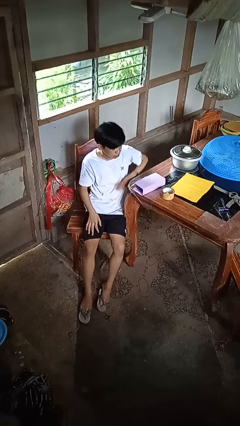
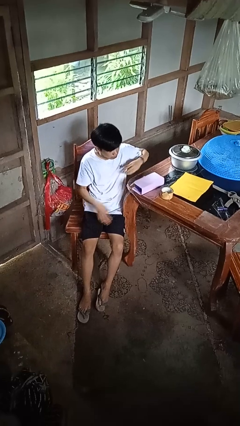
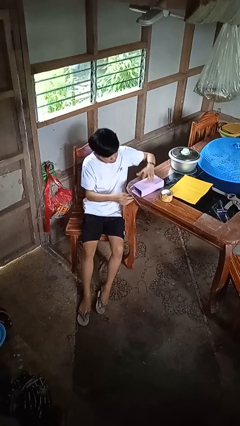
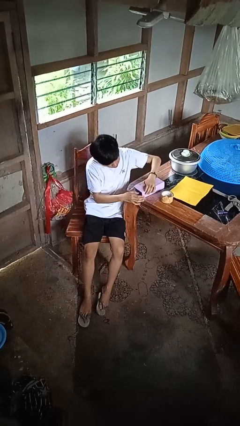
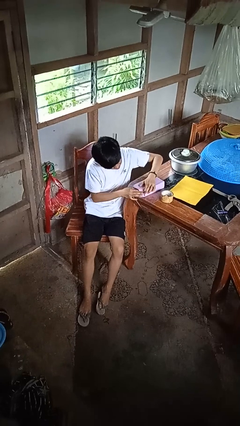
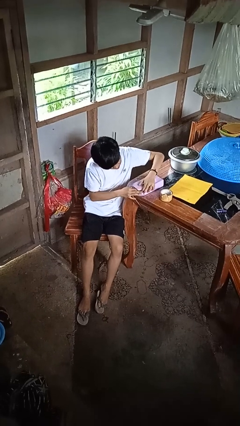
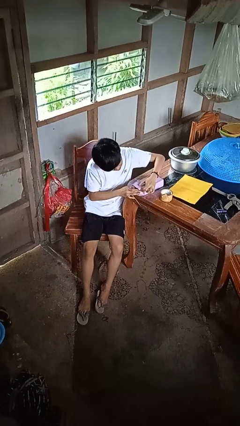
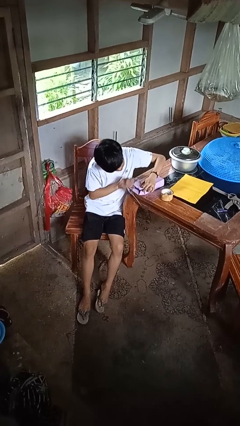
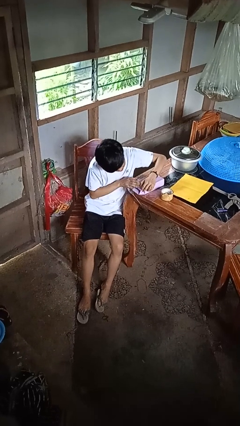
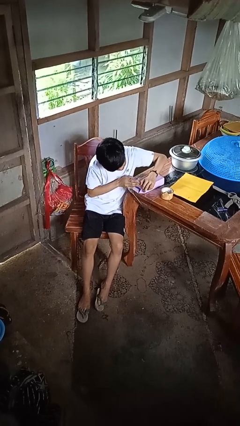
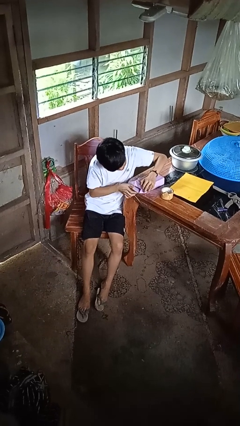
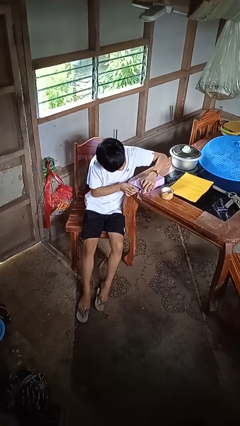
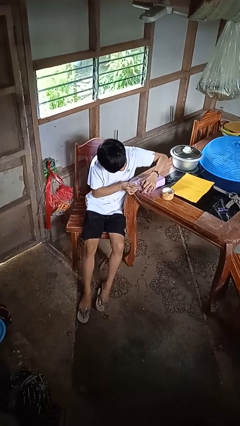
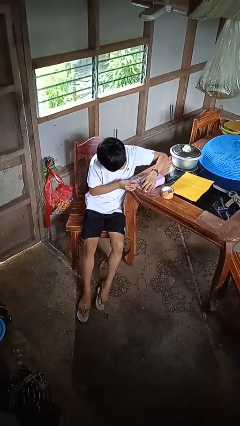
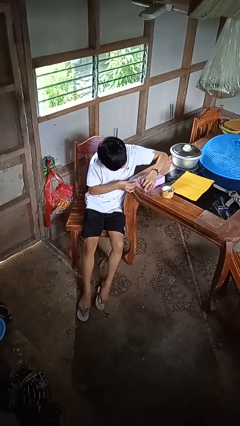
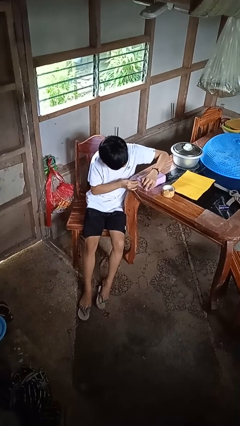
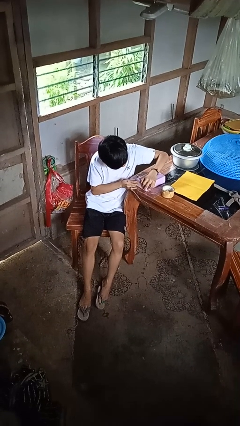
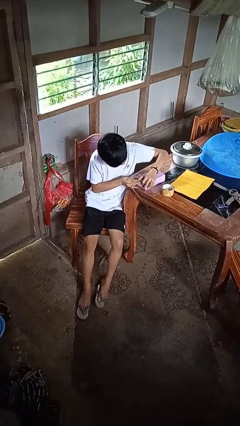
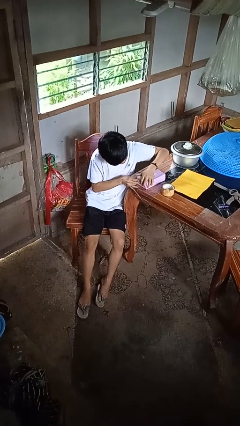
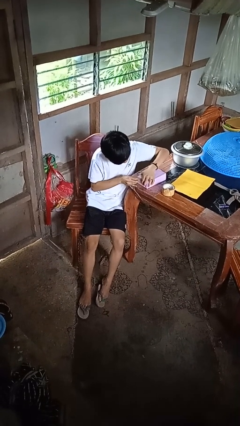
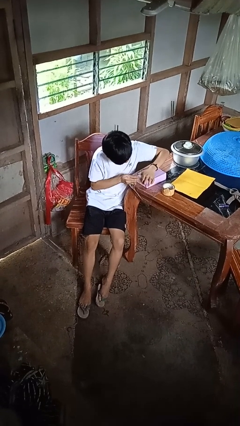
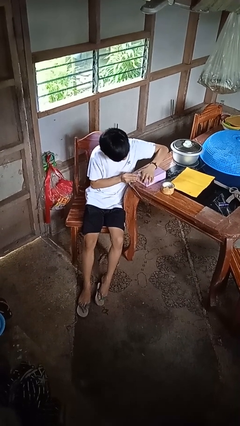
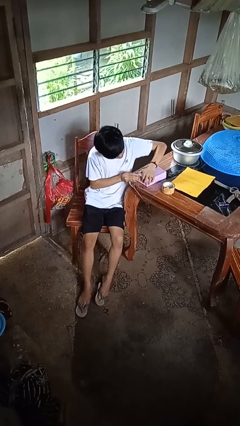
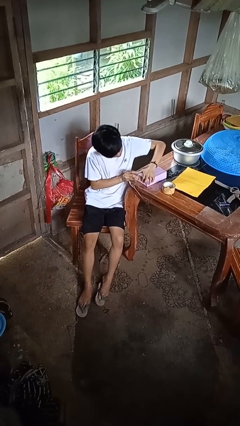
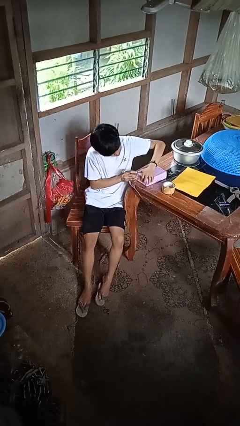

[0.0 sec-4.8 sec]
person wraps box

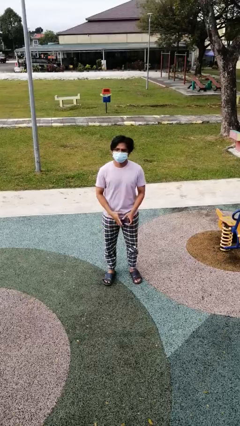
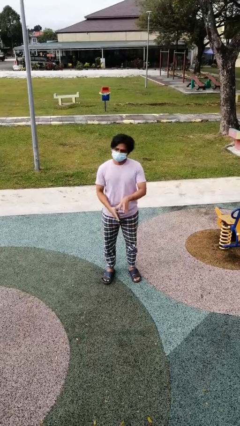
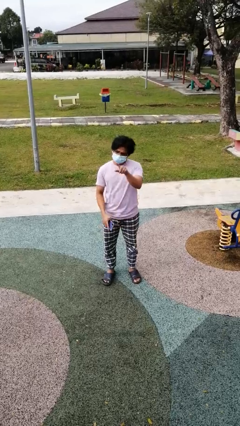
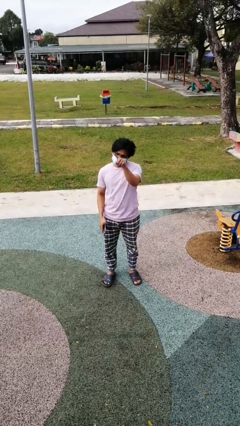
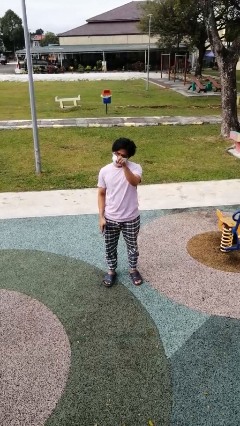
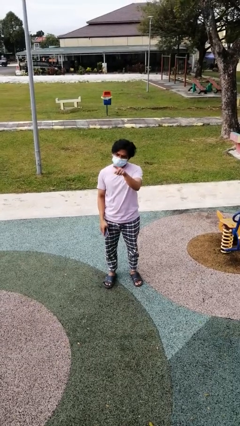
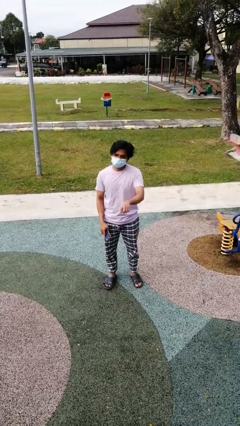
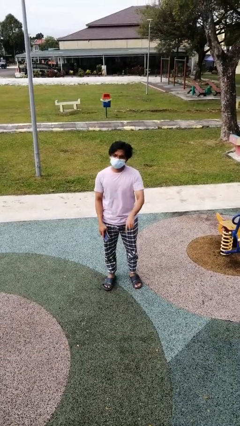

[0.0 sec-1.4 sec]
person points at person

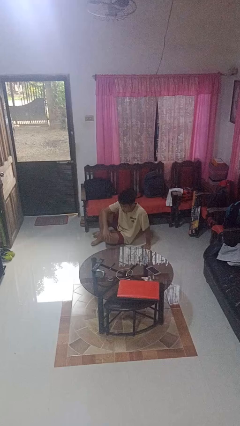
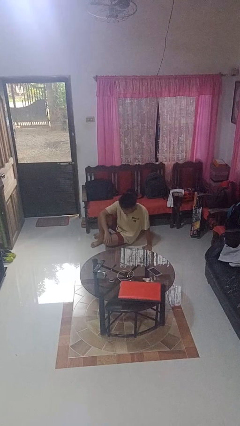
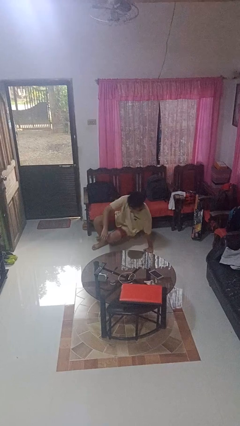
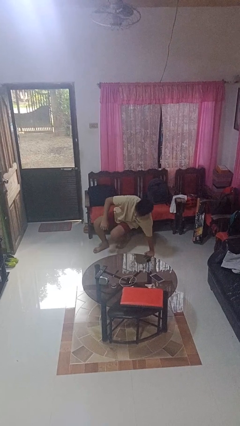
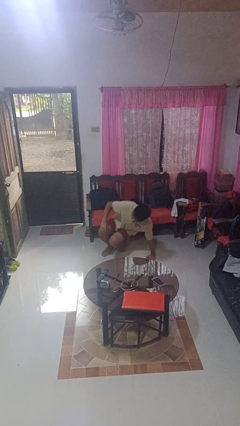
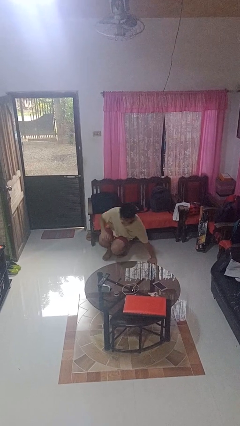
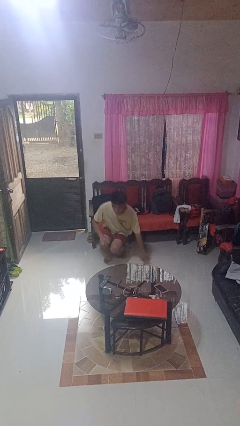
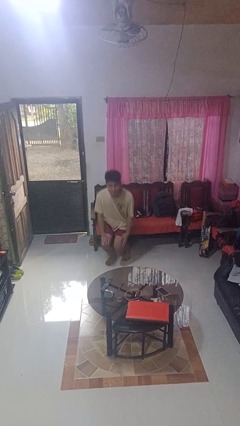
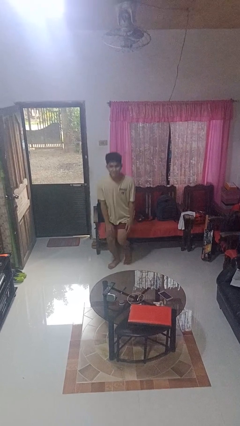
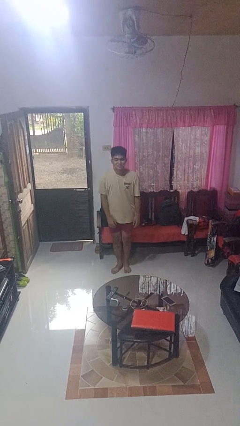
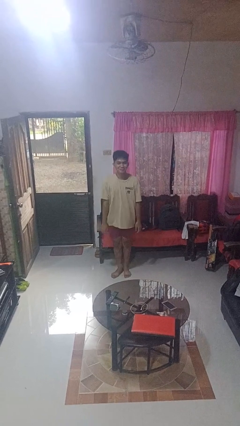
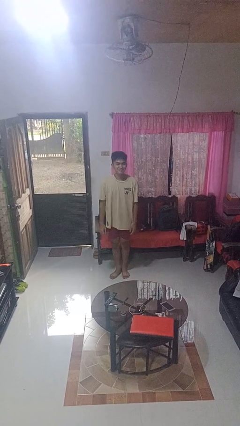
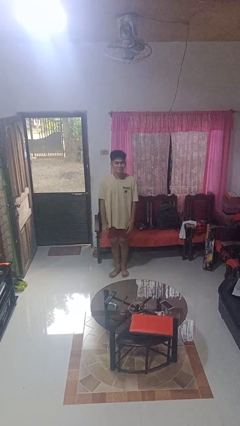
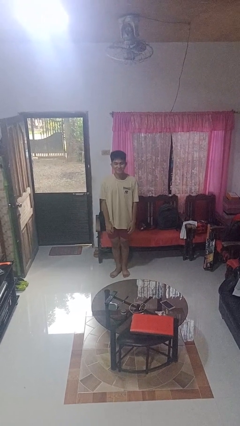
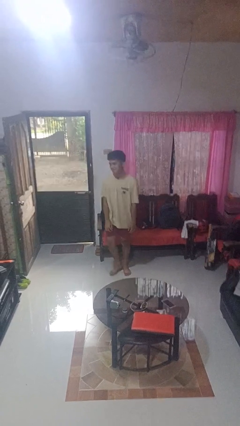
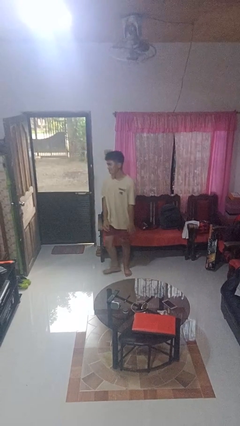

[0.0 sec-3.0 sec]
person stands up from floor

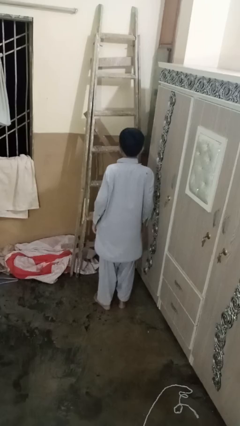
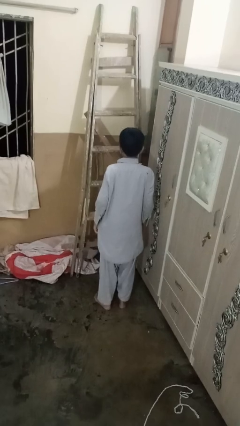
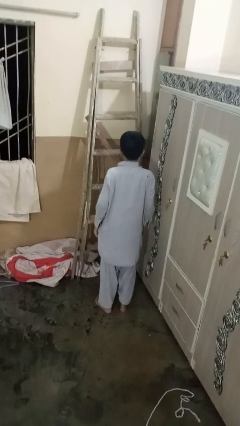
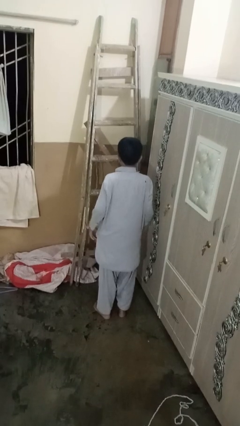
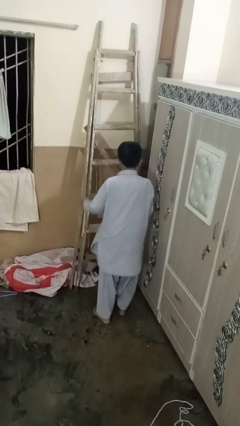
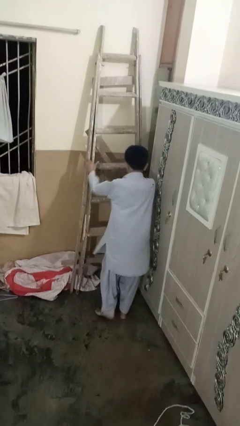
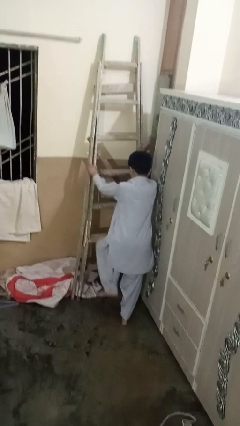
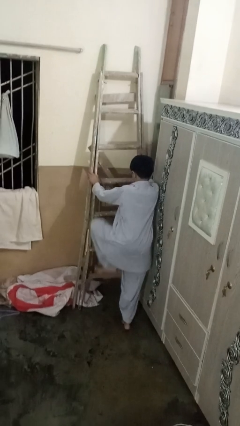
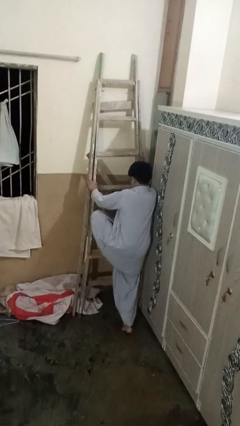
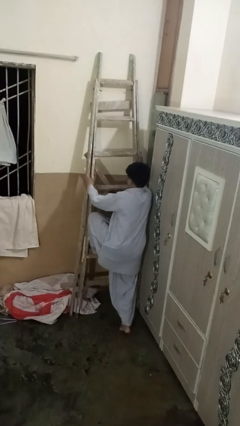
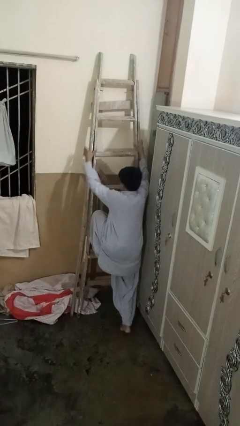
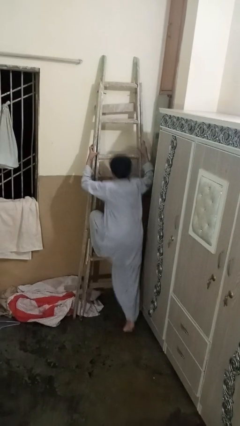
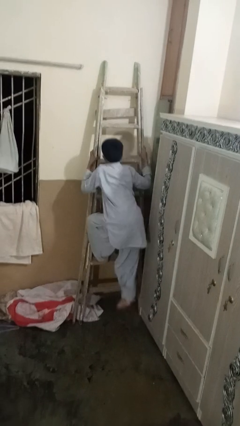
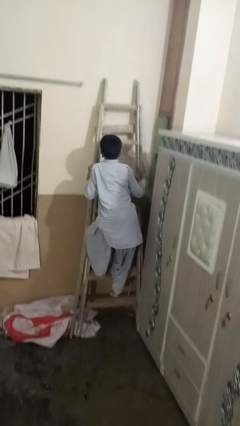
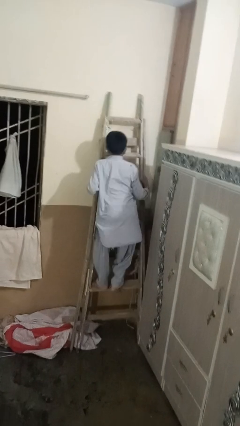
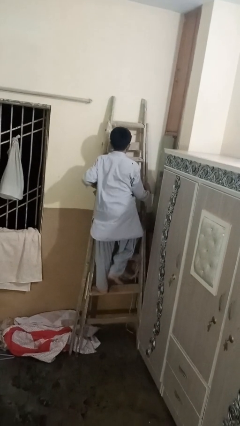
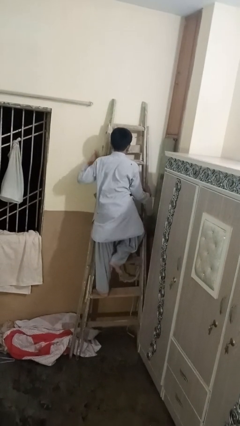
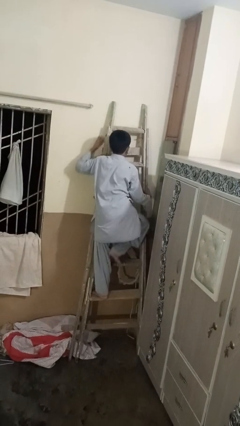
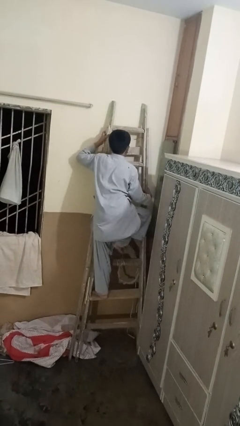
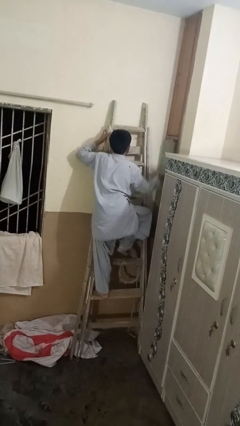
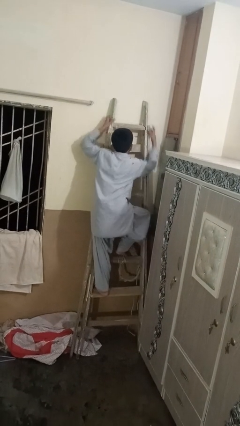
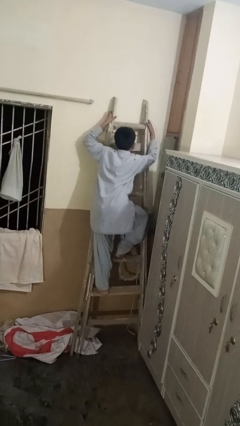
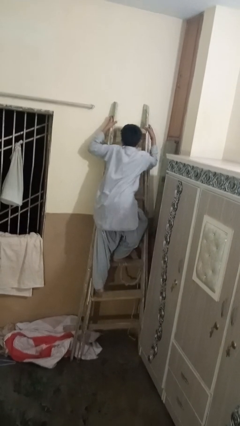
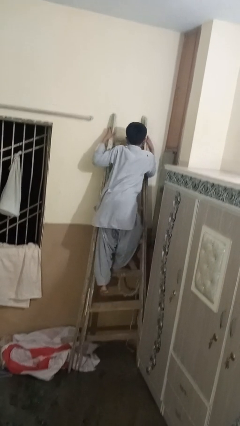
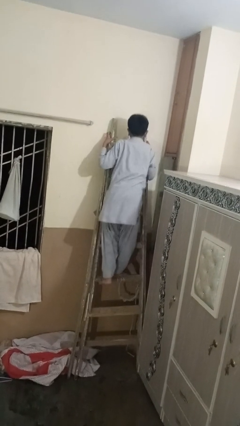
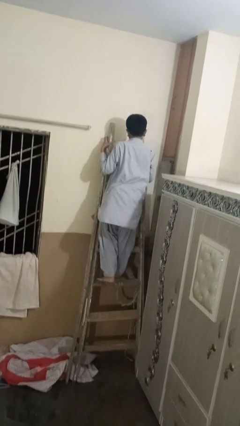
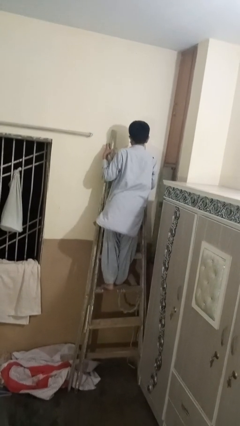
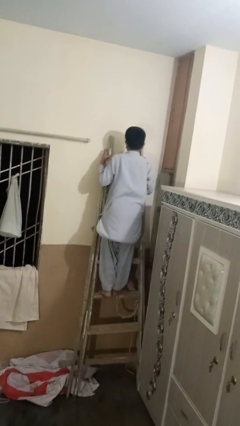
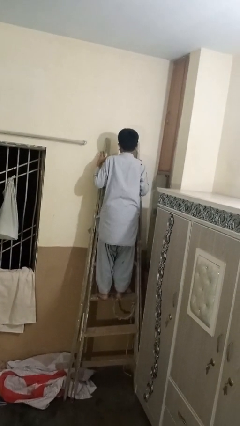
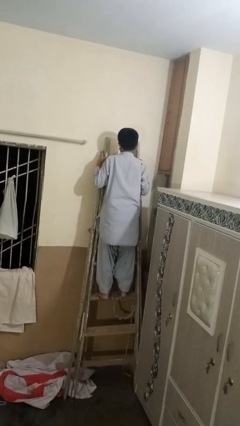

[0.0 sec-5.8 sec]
person climbs up ladder

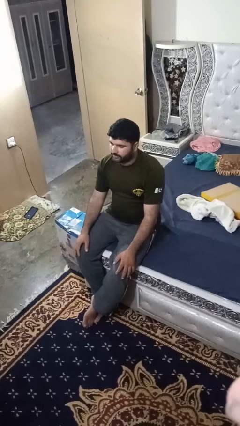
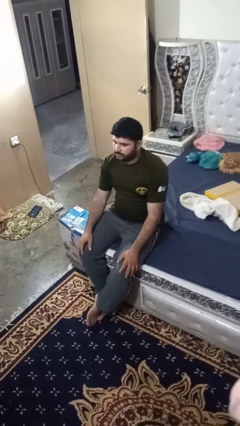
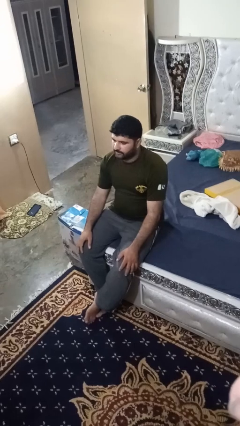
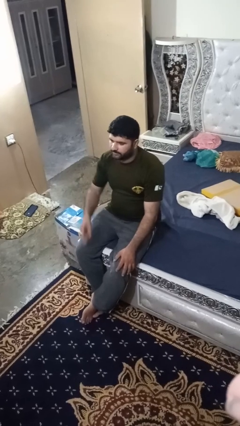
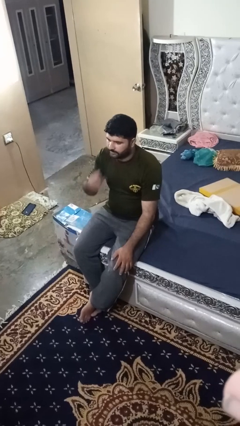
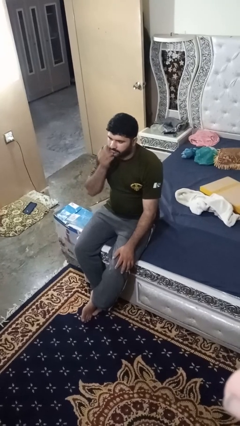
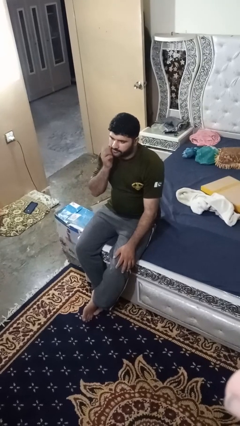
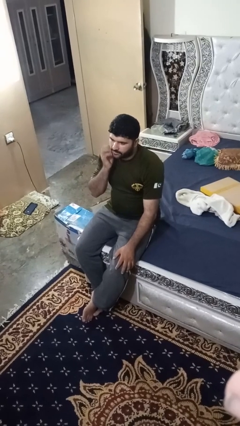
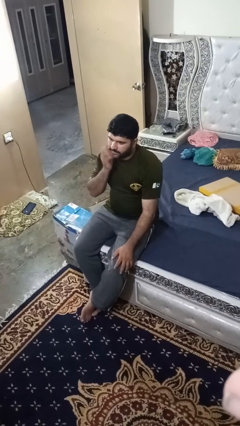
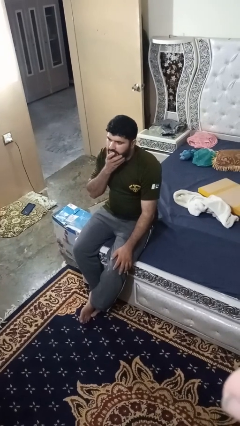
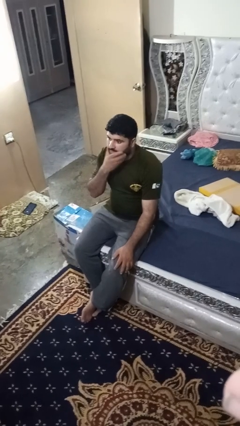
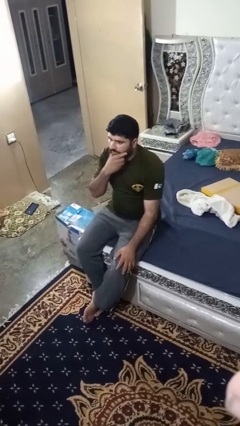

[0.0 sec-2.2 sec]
person strokes chin

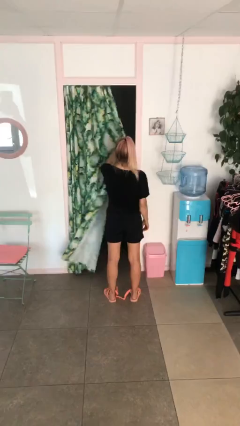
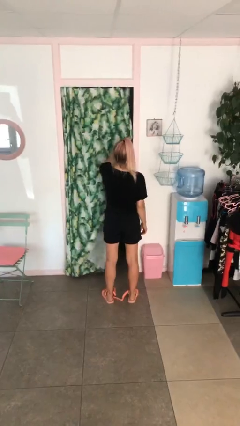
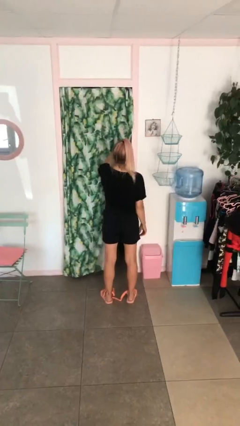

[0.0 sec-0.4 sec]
person closes sliding door
